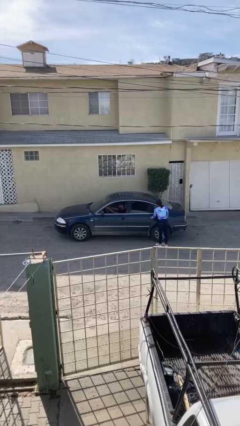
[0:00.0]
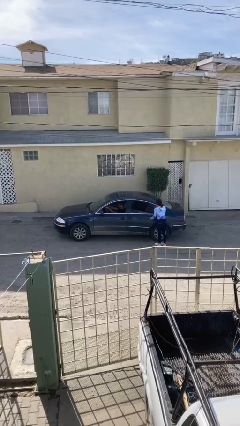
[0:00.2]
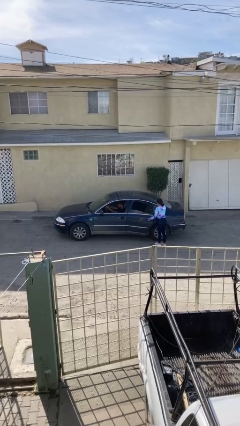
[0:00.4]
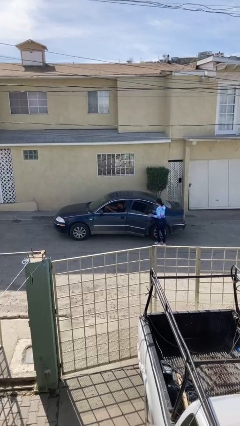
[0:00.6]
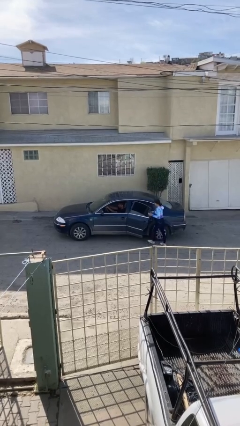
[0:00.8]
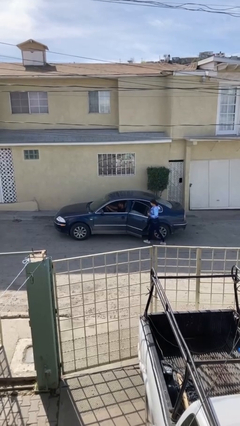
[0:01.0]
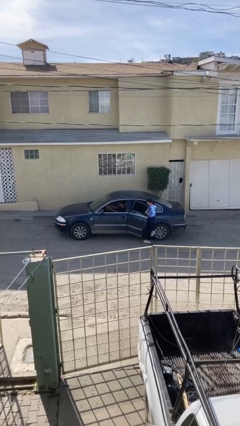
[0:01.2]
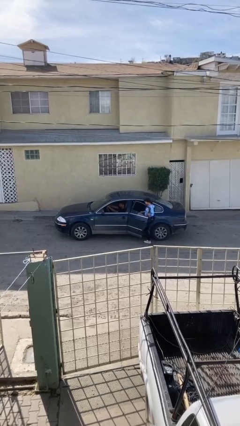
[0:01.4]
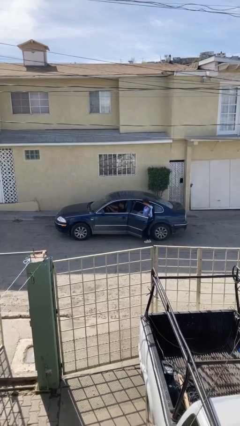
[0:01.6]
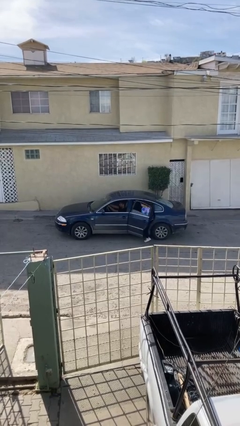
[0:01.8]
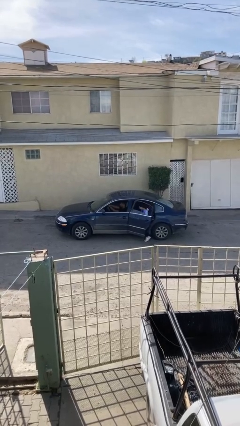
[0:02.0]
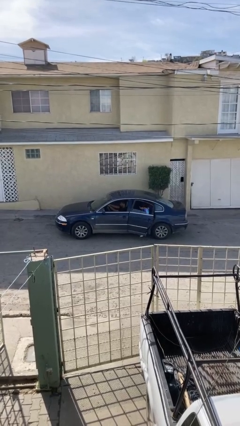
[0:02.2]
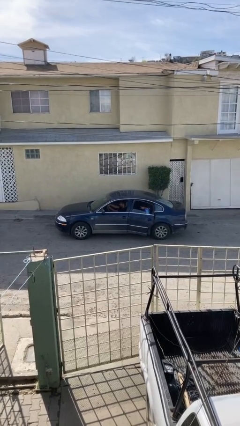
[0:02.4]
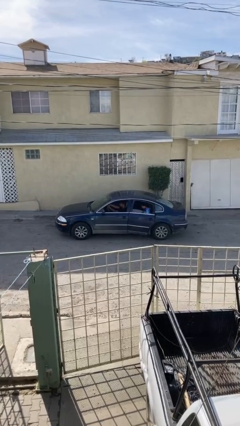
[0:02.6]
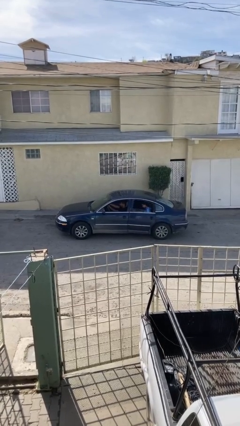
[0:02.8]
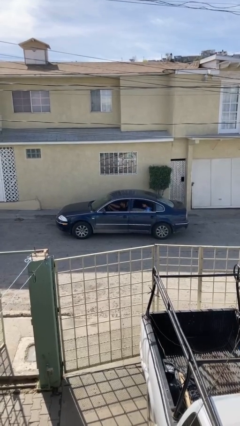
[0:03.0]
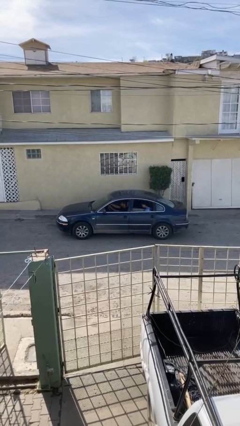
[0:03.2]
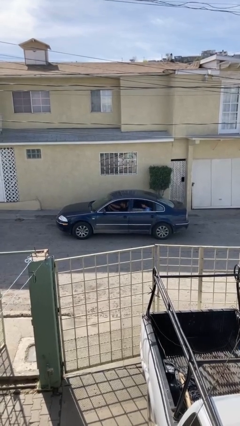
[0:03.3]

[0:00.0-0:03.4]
car picks up person

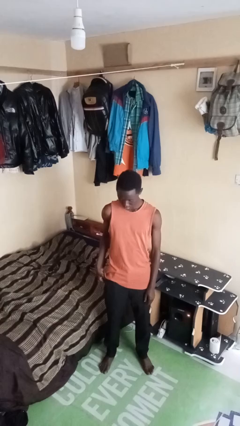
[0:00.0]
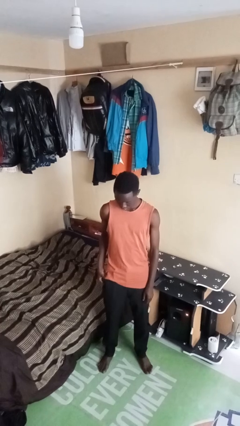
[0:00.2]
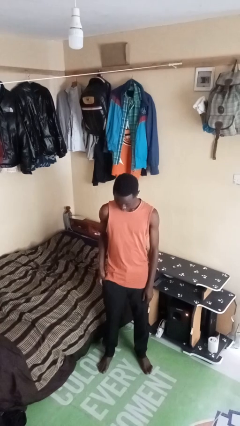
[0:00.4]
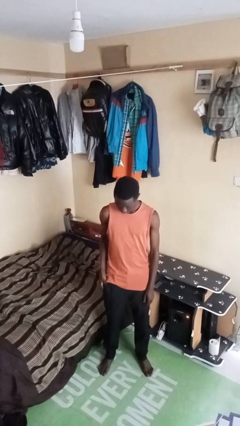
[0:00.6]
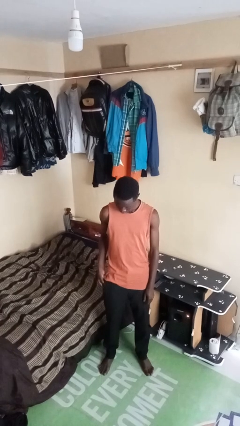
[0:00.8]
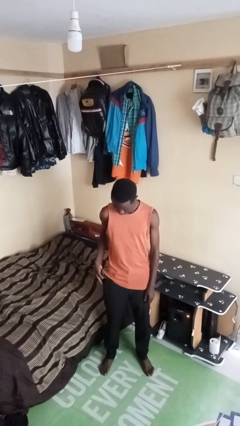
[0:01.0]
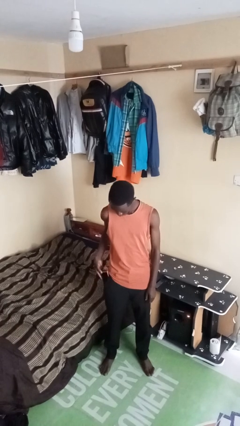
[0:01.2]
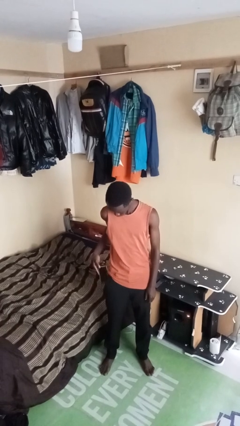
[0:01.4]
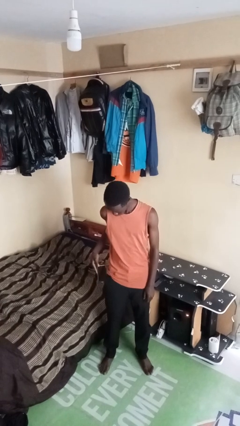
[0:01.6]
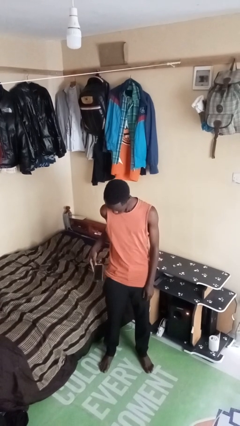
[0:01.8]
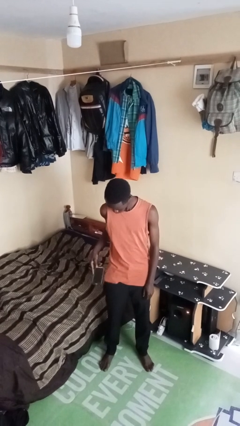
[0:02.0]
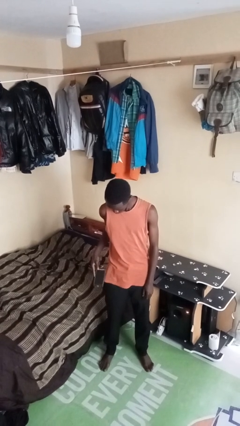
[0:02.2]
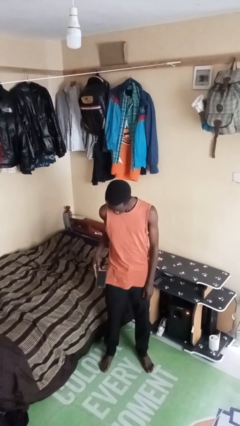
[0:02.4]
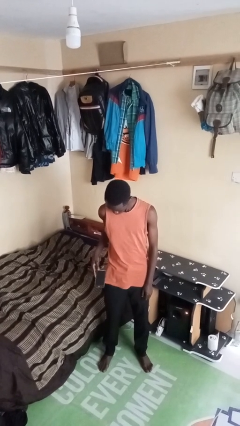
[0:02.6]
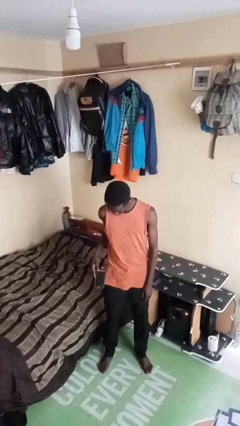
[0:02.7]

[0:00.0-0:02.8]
person takes phone from pocket

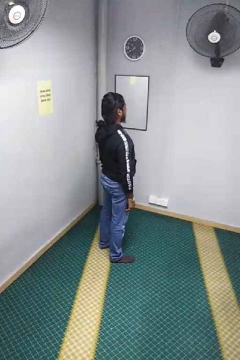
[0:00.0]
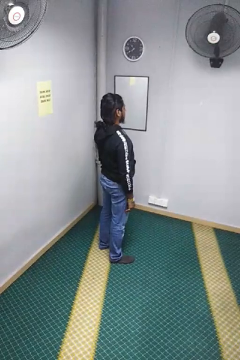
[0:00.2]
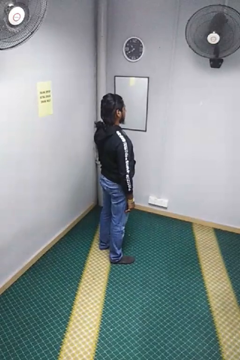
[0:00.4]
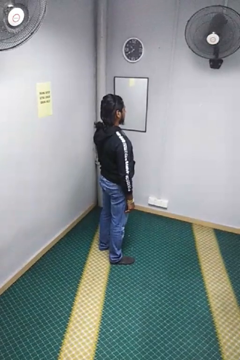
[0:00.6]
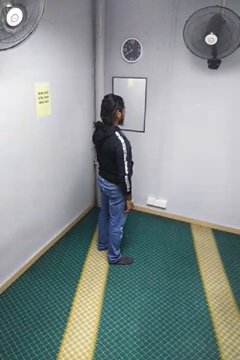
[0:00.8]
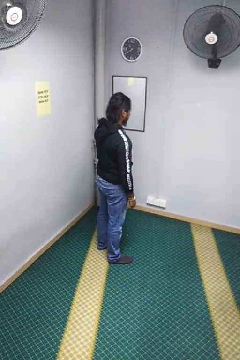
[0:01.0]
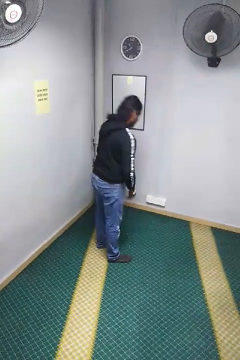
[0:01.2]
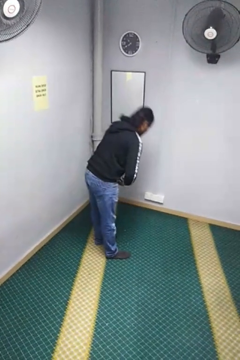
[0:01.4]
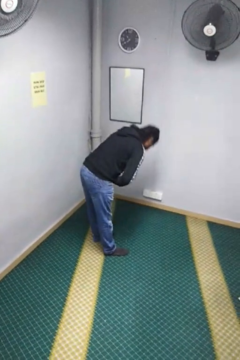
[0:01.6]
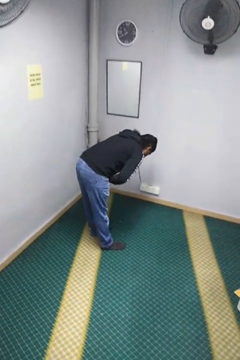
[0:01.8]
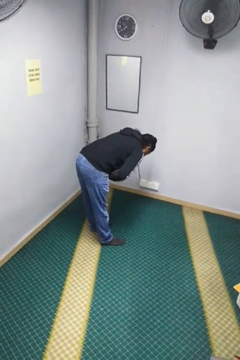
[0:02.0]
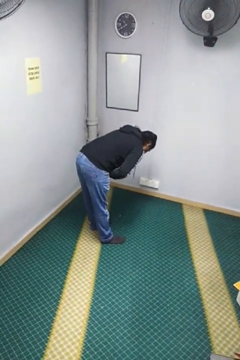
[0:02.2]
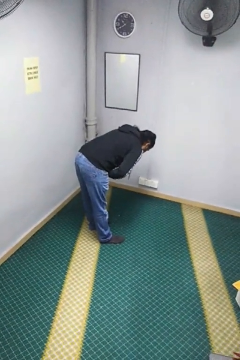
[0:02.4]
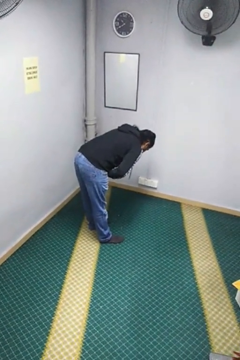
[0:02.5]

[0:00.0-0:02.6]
person bows

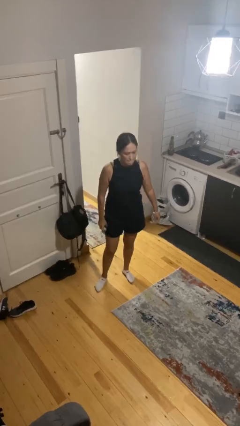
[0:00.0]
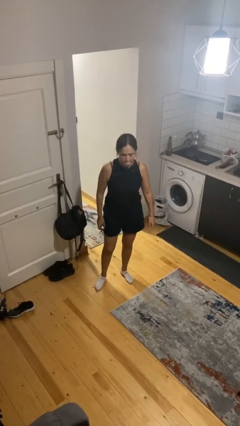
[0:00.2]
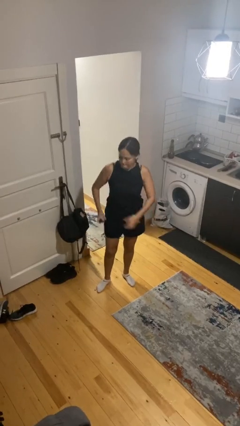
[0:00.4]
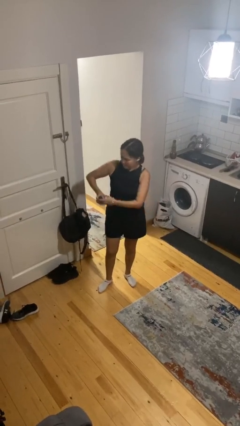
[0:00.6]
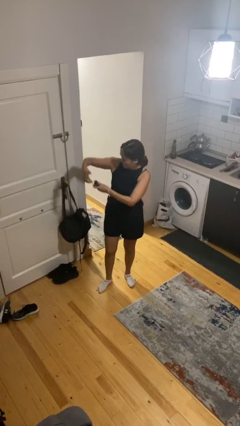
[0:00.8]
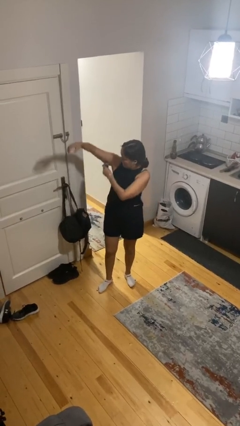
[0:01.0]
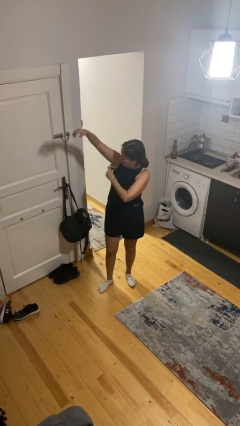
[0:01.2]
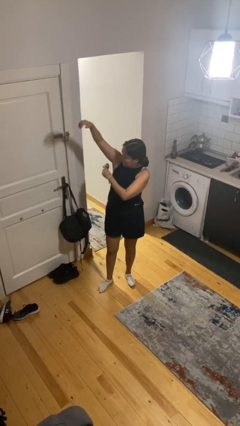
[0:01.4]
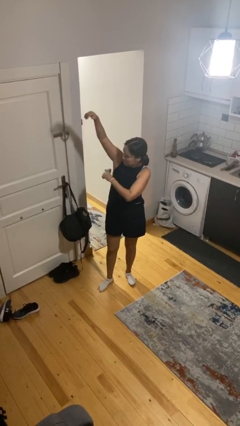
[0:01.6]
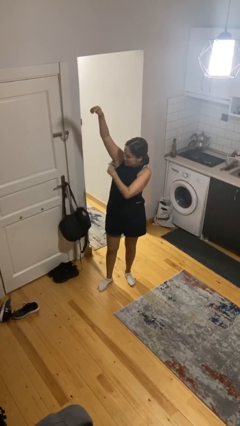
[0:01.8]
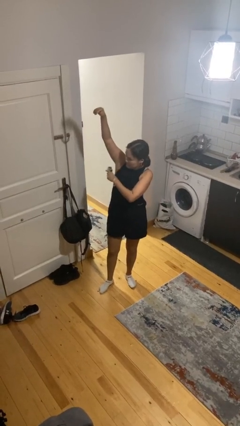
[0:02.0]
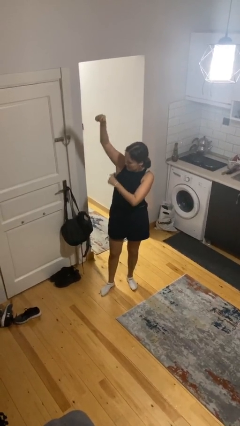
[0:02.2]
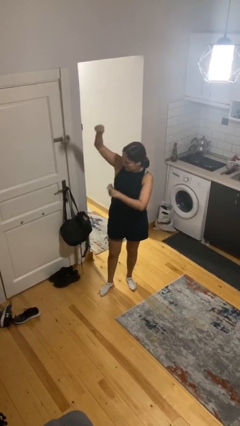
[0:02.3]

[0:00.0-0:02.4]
person applies deodorant

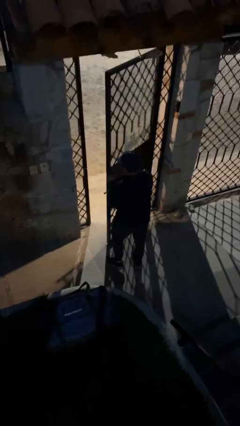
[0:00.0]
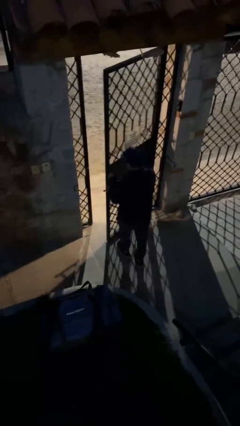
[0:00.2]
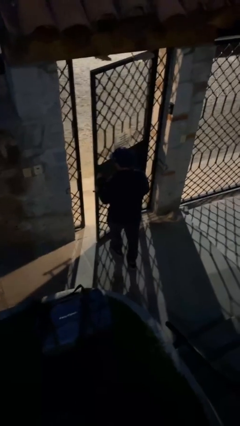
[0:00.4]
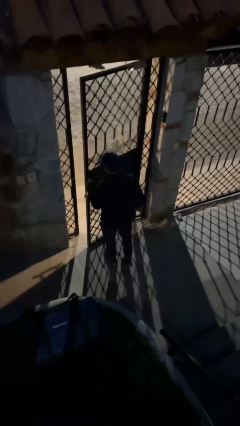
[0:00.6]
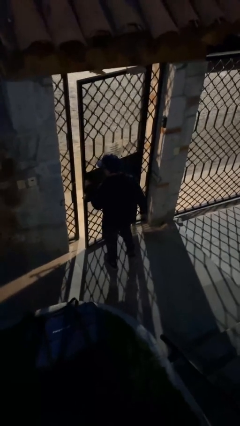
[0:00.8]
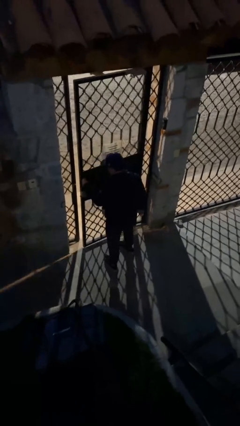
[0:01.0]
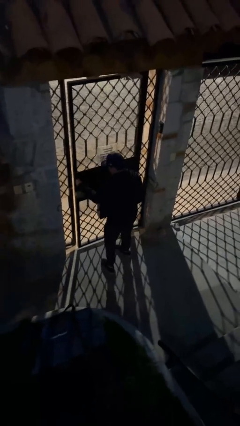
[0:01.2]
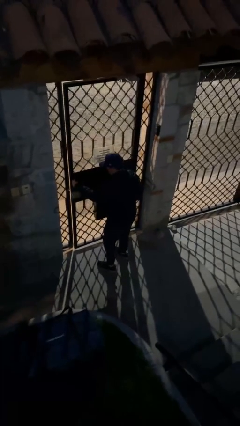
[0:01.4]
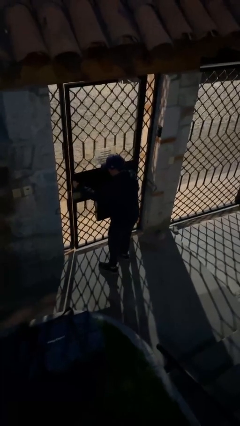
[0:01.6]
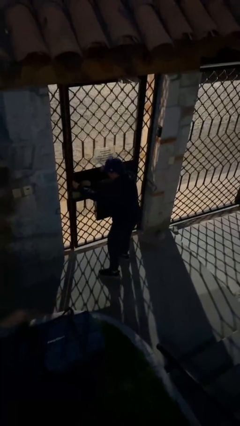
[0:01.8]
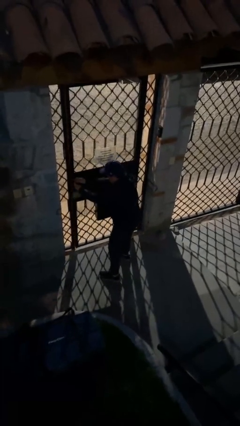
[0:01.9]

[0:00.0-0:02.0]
person closes facility door

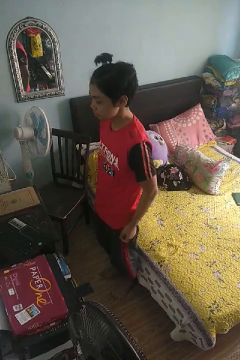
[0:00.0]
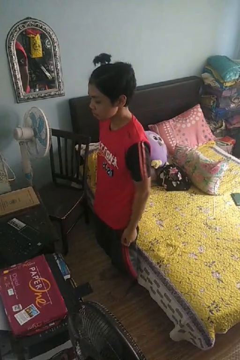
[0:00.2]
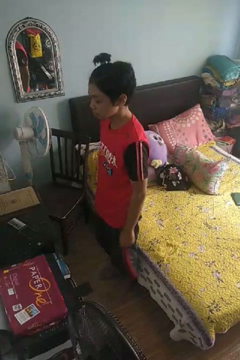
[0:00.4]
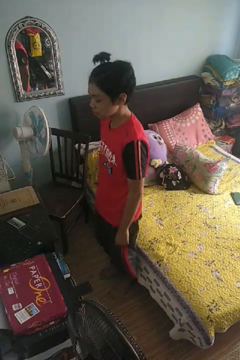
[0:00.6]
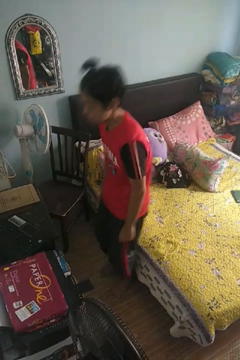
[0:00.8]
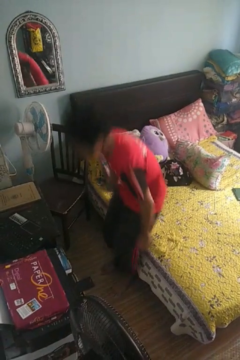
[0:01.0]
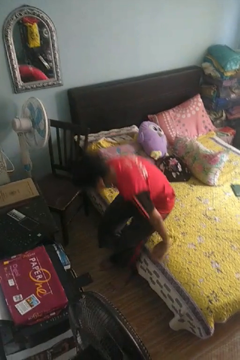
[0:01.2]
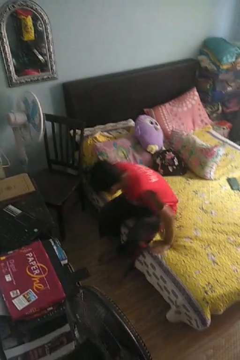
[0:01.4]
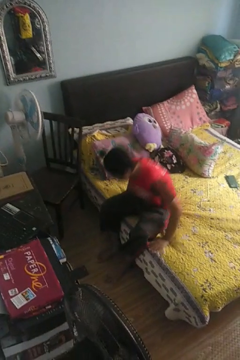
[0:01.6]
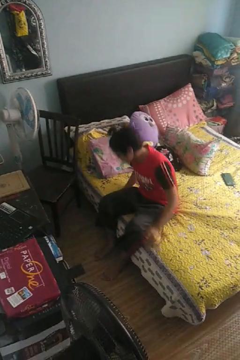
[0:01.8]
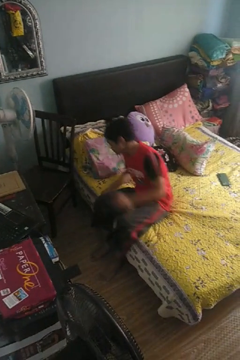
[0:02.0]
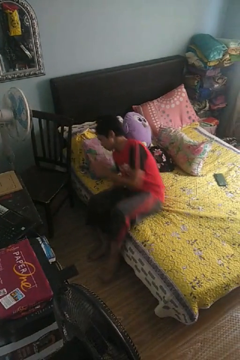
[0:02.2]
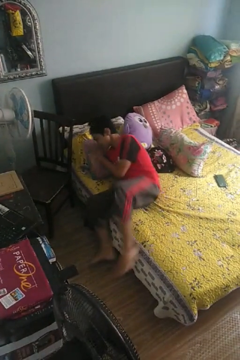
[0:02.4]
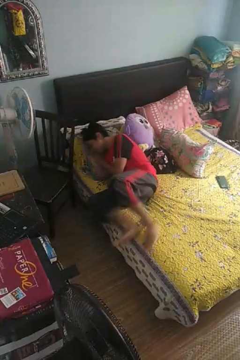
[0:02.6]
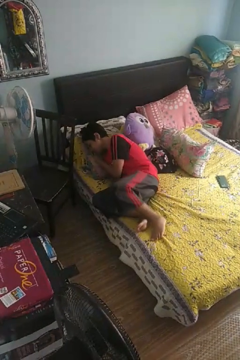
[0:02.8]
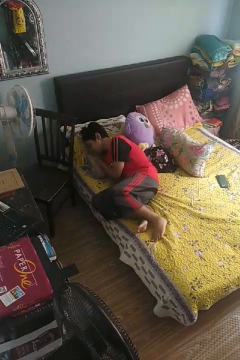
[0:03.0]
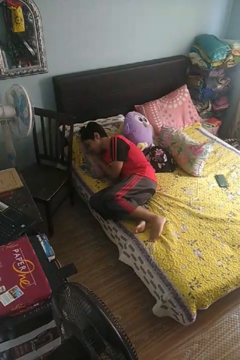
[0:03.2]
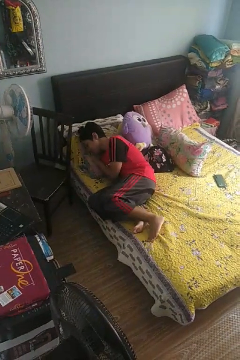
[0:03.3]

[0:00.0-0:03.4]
person lies down on bed

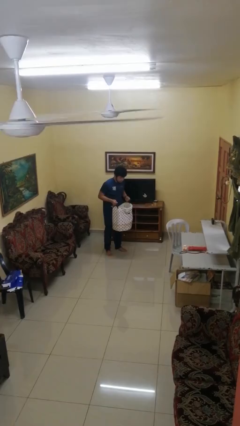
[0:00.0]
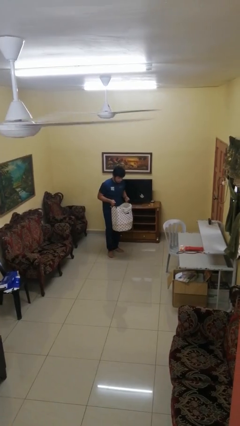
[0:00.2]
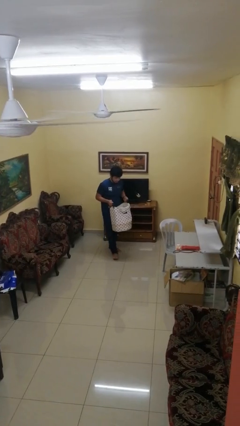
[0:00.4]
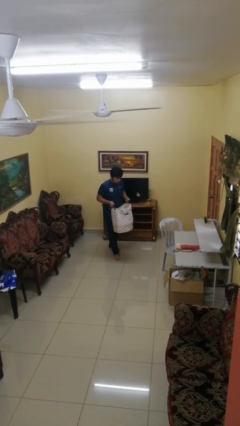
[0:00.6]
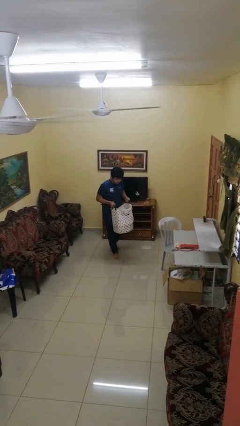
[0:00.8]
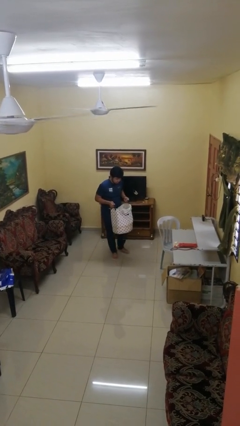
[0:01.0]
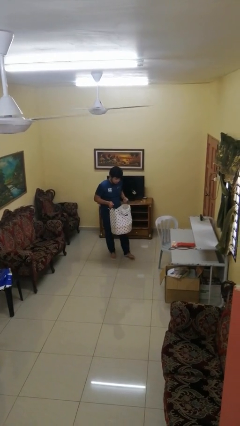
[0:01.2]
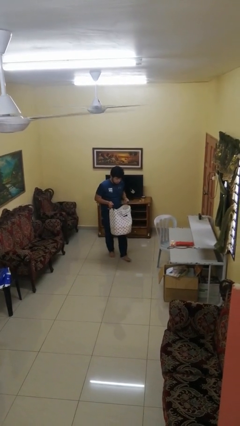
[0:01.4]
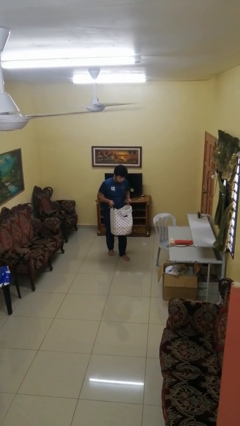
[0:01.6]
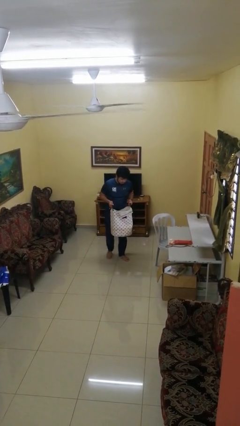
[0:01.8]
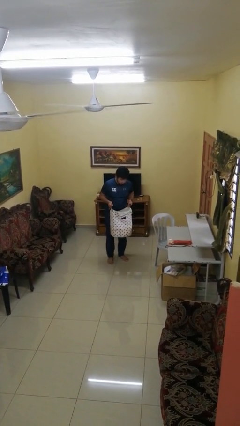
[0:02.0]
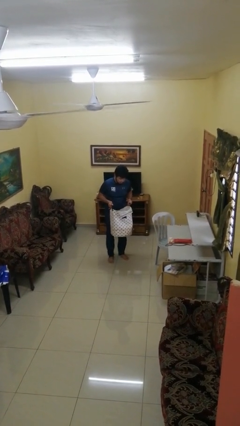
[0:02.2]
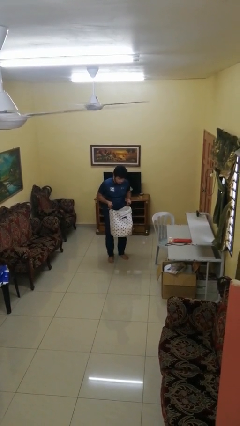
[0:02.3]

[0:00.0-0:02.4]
person carries laundry basket
